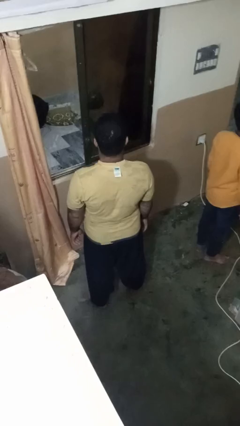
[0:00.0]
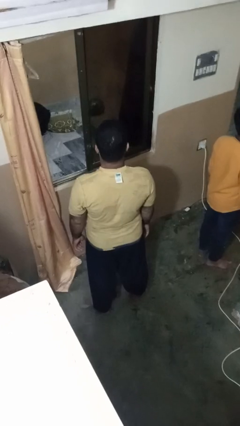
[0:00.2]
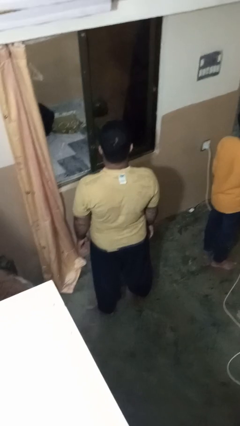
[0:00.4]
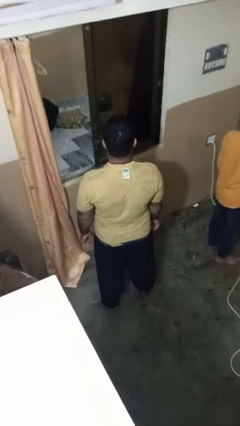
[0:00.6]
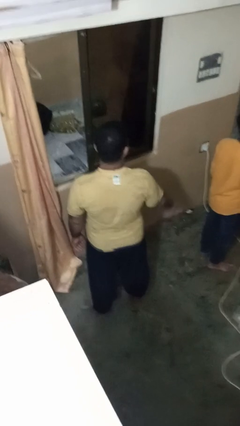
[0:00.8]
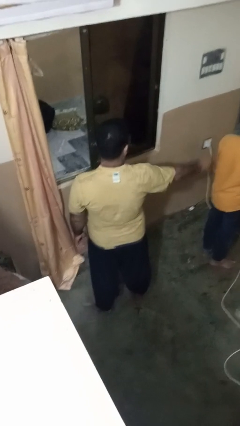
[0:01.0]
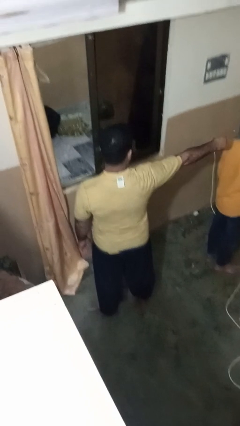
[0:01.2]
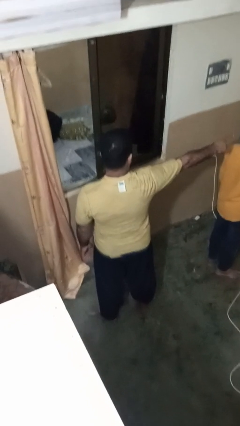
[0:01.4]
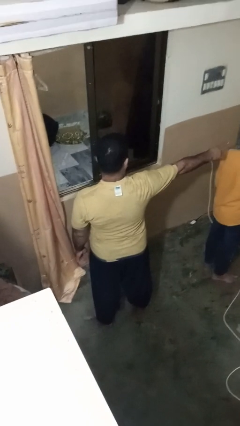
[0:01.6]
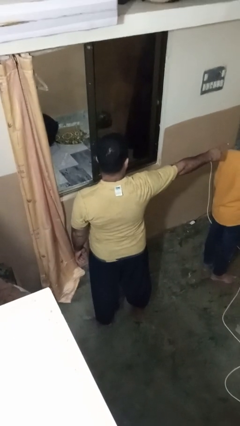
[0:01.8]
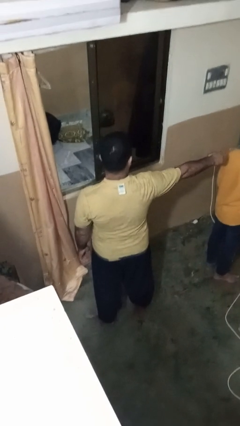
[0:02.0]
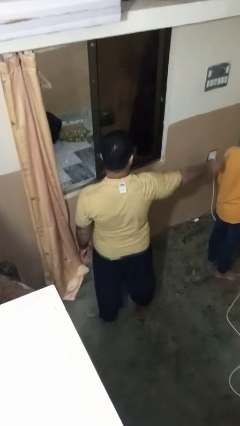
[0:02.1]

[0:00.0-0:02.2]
person points at person

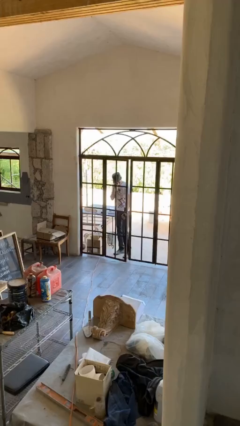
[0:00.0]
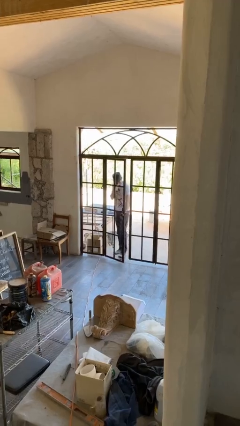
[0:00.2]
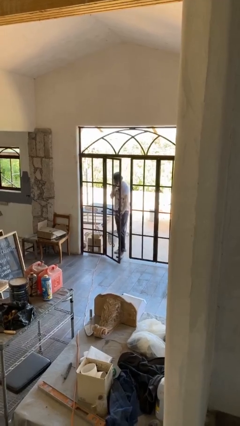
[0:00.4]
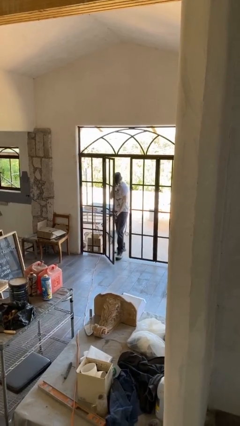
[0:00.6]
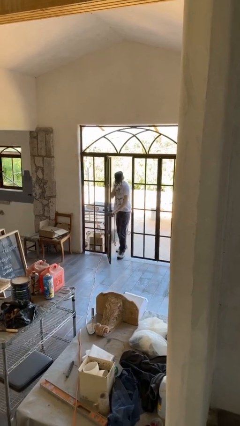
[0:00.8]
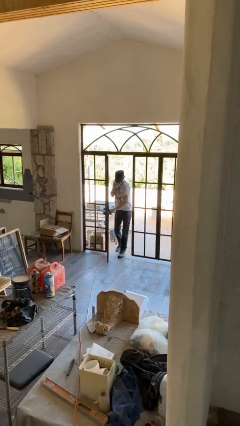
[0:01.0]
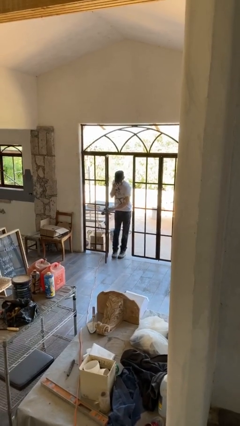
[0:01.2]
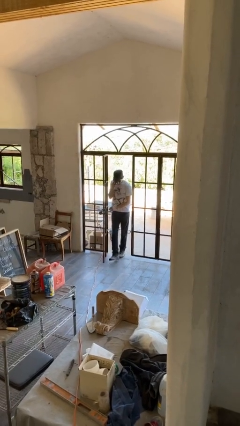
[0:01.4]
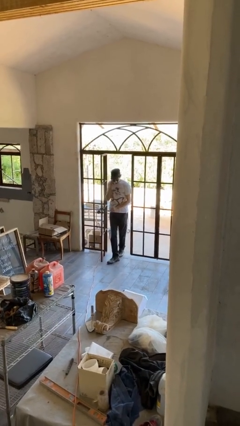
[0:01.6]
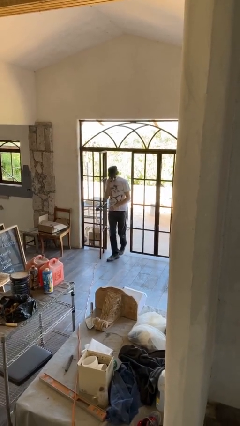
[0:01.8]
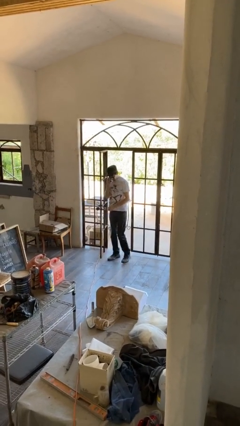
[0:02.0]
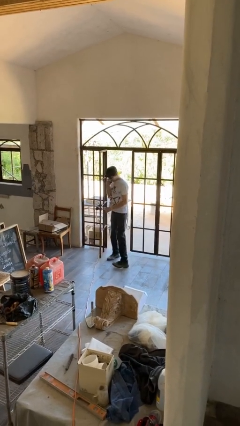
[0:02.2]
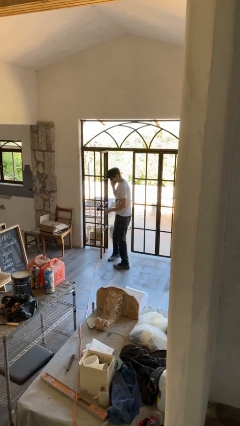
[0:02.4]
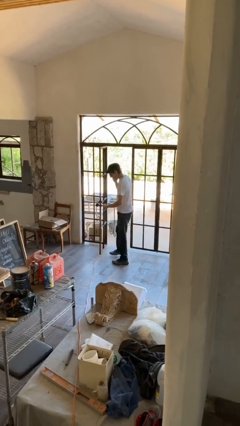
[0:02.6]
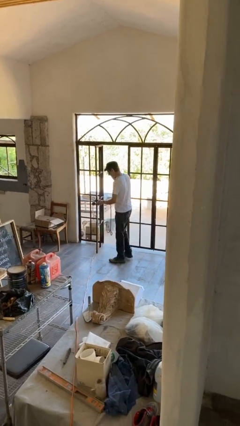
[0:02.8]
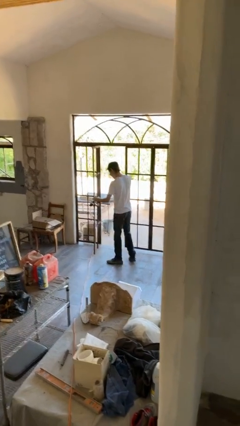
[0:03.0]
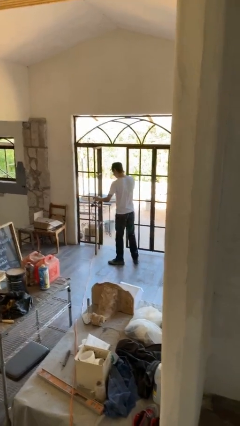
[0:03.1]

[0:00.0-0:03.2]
person opens facility door

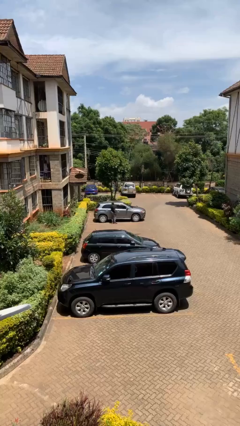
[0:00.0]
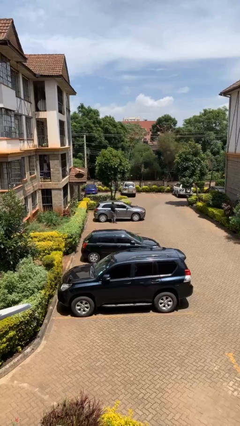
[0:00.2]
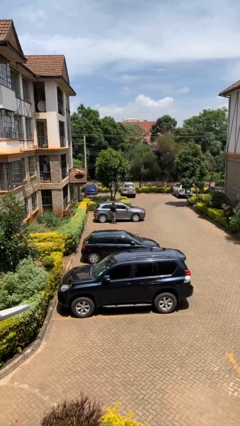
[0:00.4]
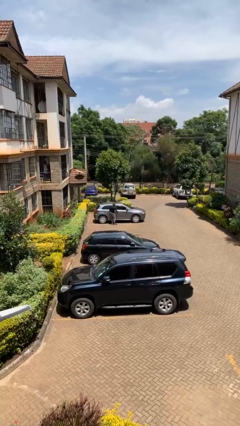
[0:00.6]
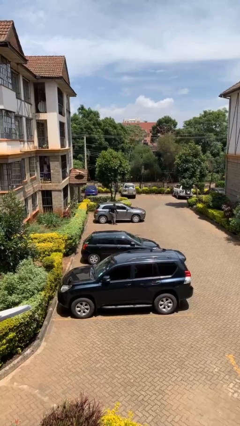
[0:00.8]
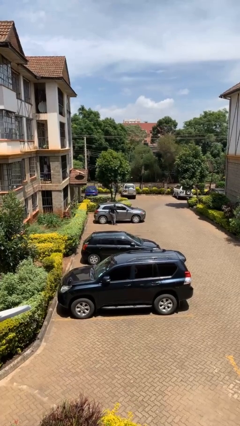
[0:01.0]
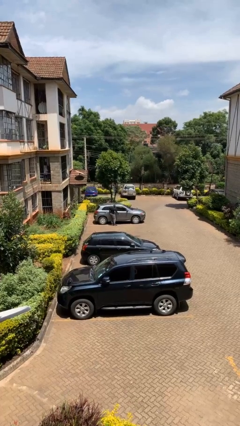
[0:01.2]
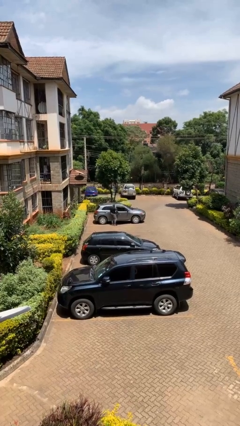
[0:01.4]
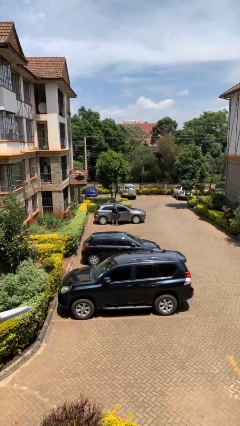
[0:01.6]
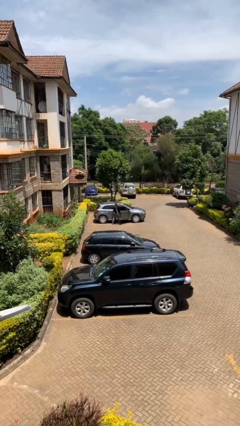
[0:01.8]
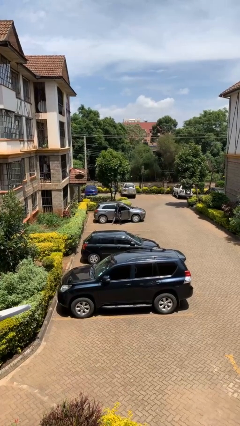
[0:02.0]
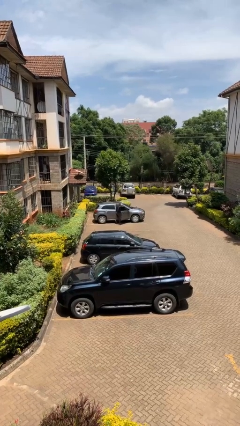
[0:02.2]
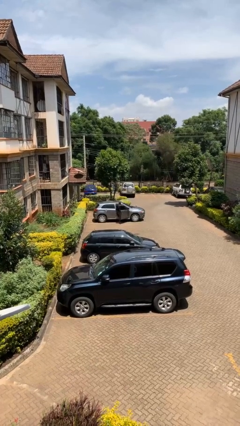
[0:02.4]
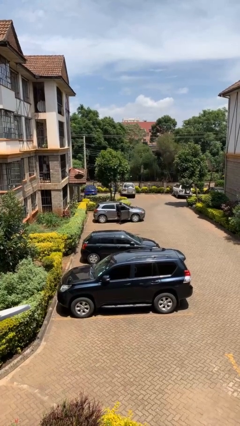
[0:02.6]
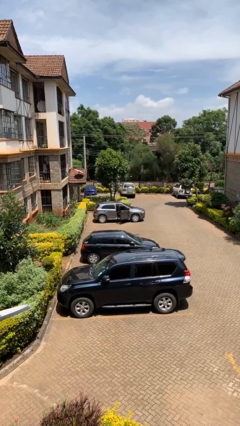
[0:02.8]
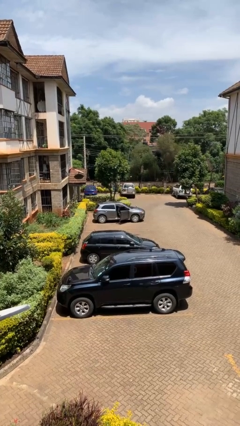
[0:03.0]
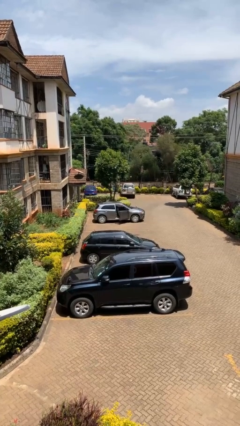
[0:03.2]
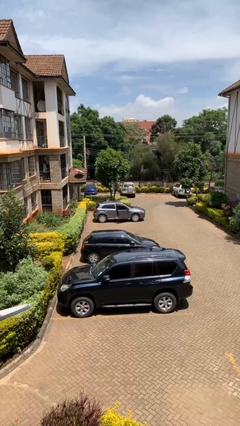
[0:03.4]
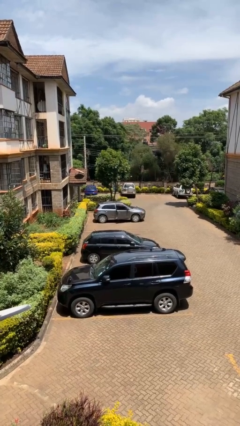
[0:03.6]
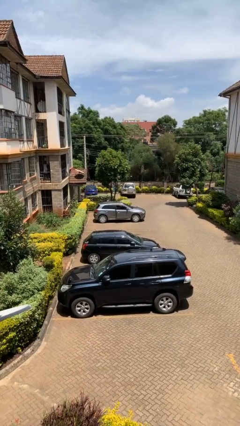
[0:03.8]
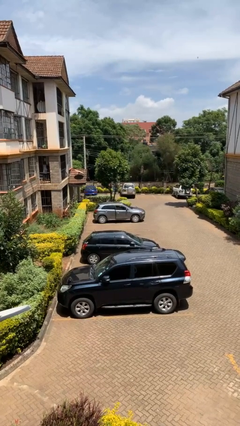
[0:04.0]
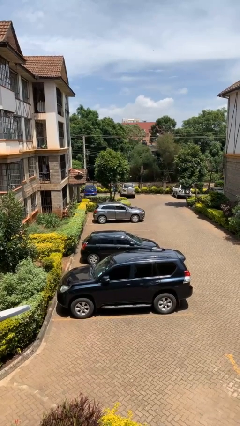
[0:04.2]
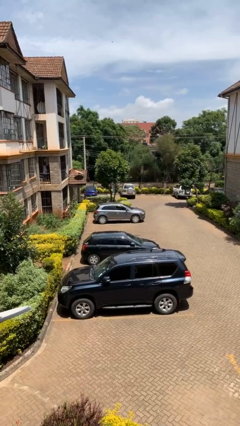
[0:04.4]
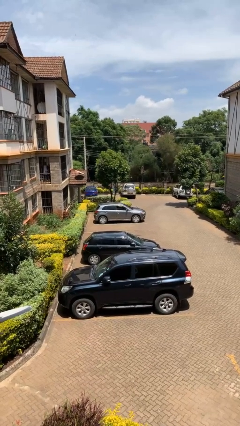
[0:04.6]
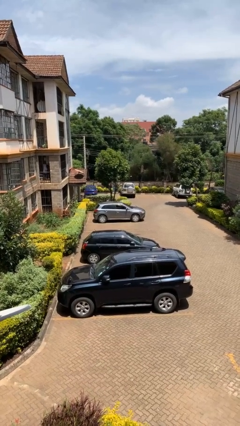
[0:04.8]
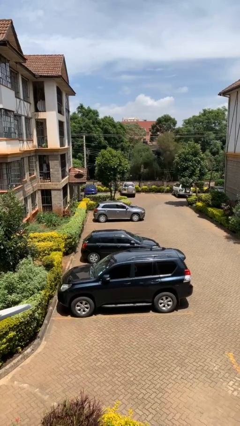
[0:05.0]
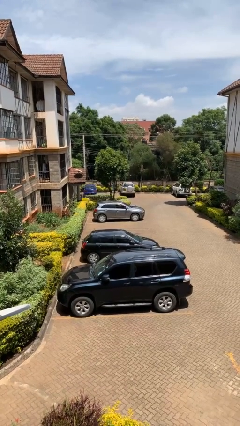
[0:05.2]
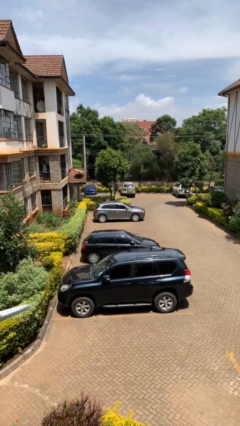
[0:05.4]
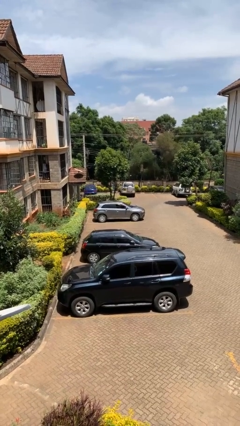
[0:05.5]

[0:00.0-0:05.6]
car picks up person

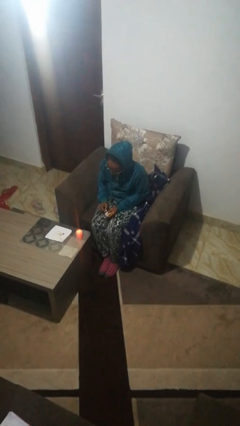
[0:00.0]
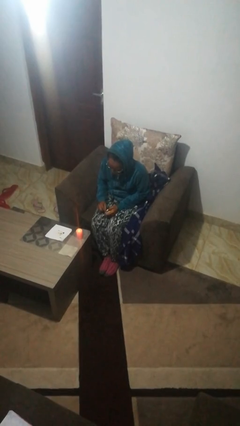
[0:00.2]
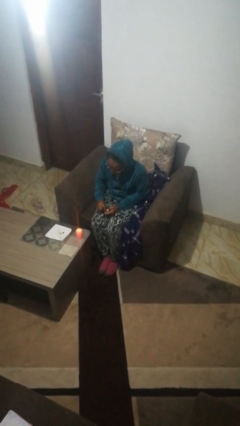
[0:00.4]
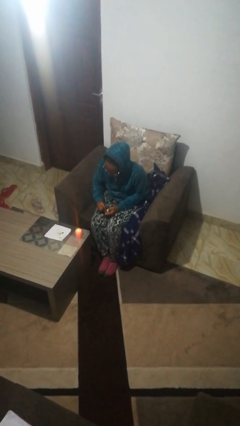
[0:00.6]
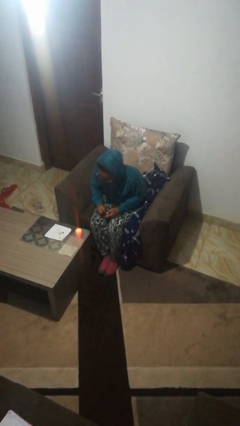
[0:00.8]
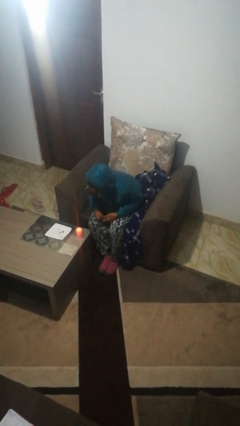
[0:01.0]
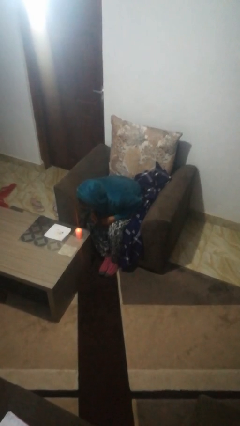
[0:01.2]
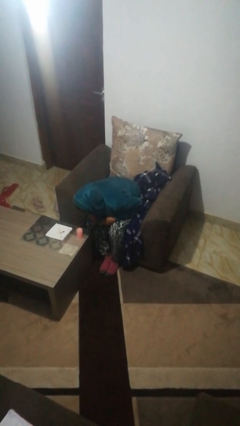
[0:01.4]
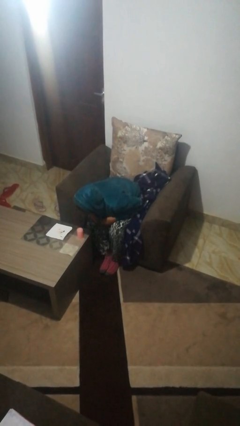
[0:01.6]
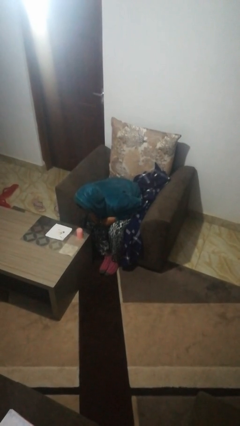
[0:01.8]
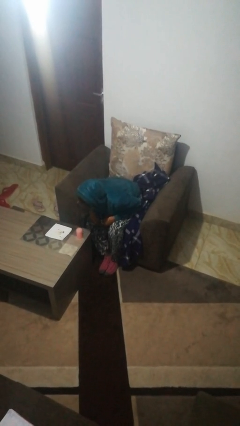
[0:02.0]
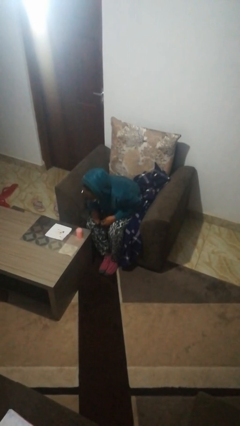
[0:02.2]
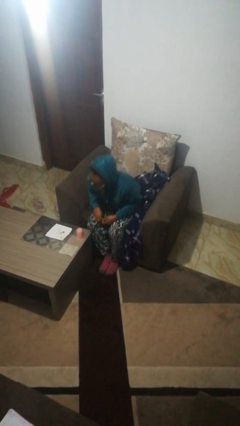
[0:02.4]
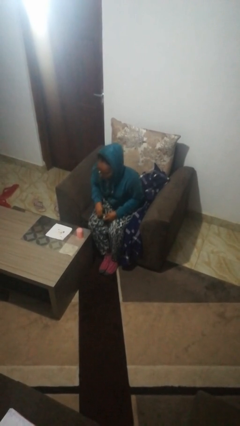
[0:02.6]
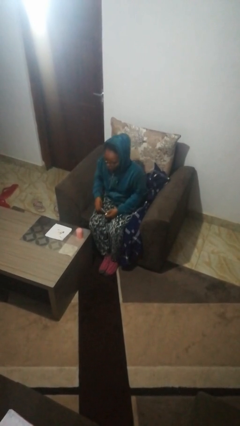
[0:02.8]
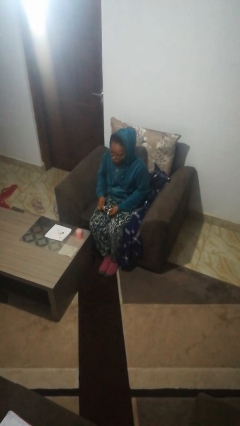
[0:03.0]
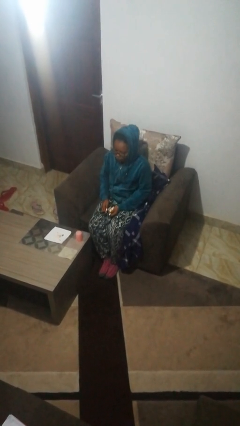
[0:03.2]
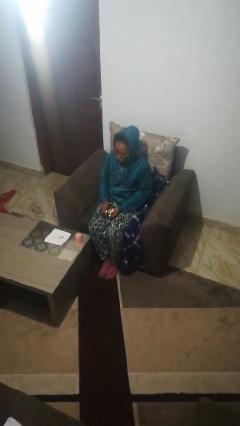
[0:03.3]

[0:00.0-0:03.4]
person extinguishes candle

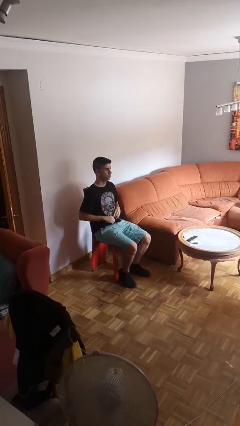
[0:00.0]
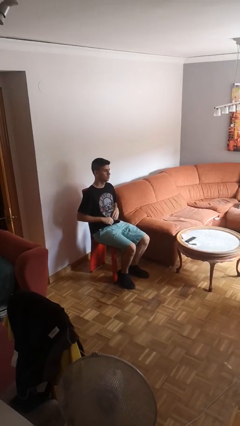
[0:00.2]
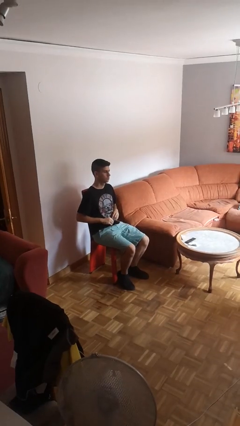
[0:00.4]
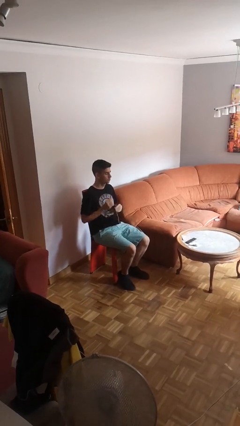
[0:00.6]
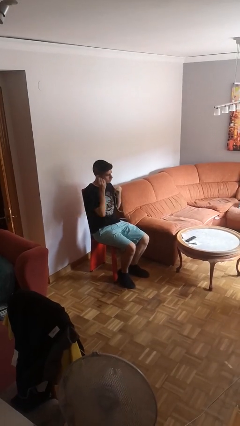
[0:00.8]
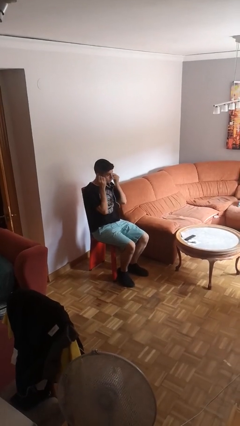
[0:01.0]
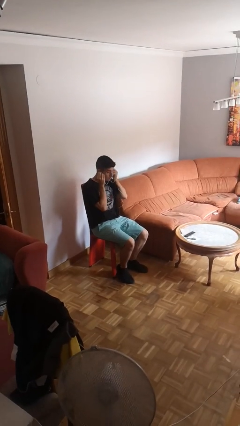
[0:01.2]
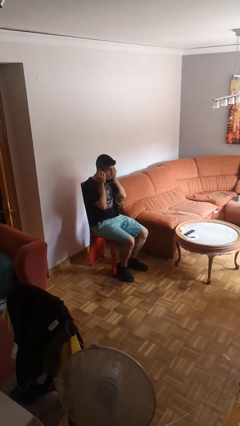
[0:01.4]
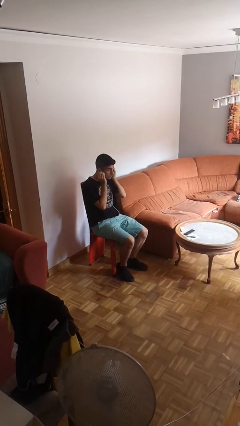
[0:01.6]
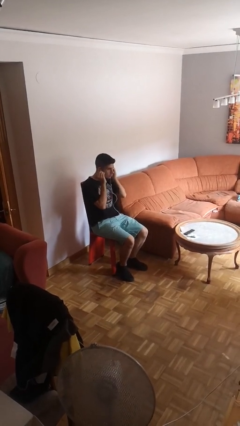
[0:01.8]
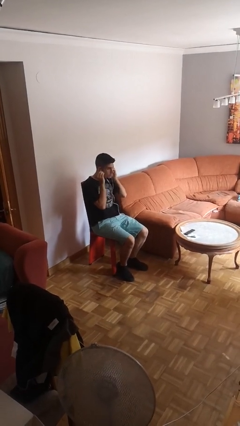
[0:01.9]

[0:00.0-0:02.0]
person puts on headphones

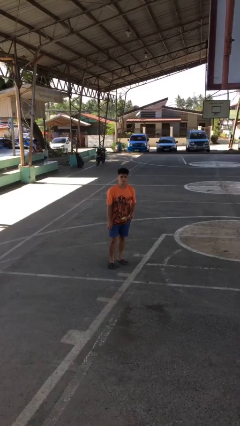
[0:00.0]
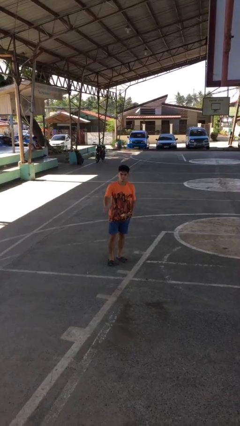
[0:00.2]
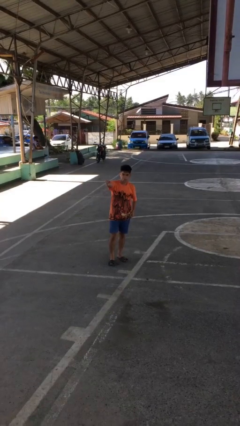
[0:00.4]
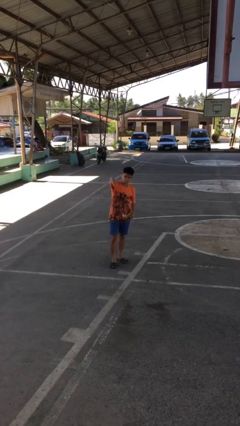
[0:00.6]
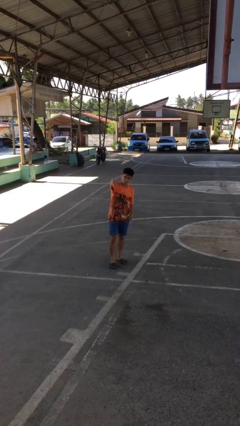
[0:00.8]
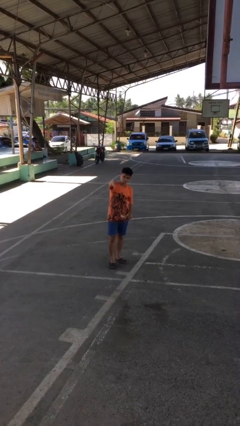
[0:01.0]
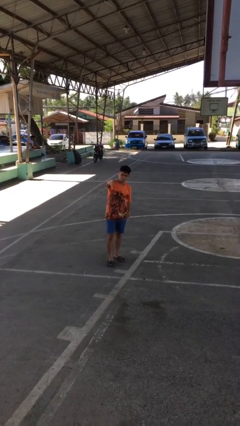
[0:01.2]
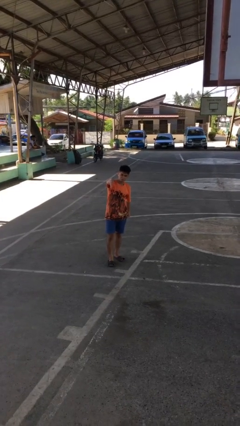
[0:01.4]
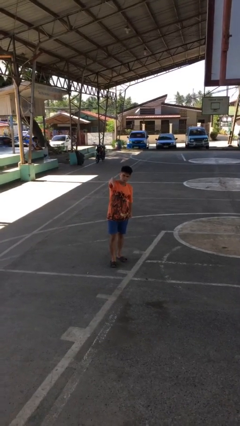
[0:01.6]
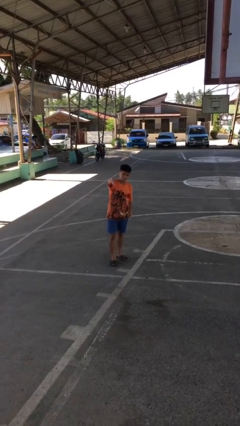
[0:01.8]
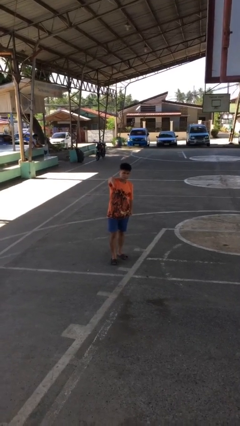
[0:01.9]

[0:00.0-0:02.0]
person gestures thumbs down
